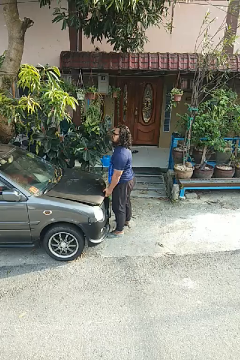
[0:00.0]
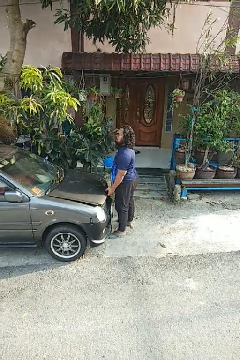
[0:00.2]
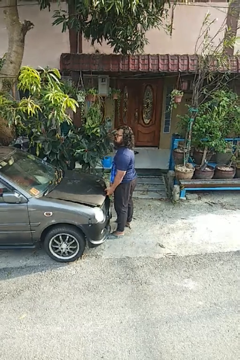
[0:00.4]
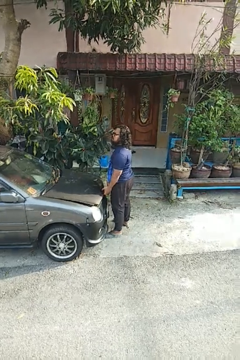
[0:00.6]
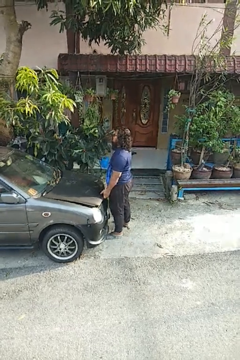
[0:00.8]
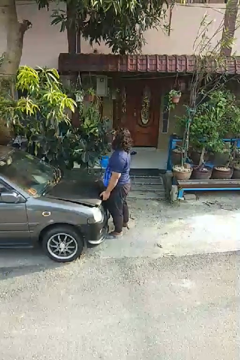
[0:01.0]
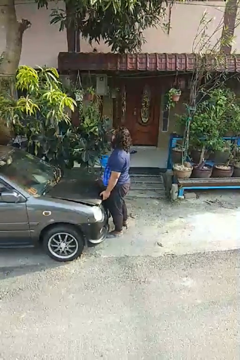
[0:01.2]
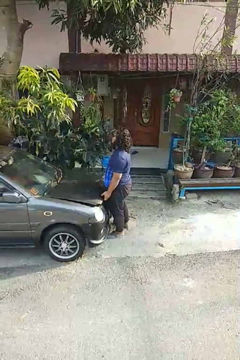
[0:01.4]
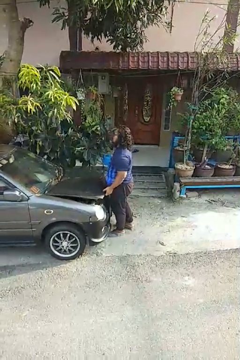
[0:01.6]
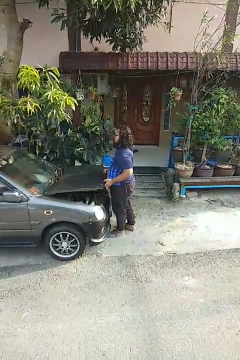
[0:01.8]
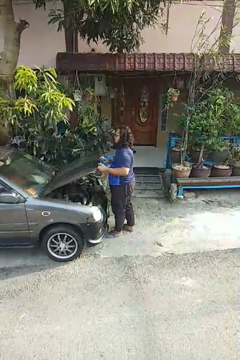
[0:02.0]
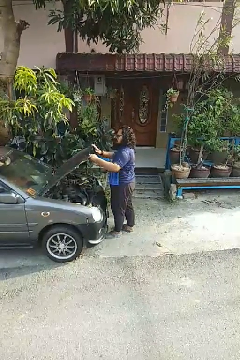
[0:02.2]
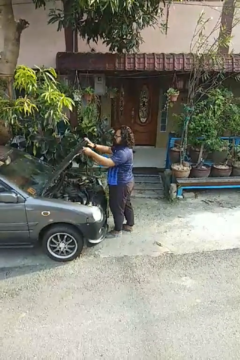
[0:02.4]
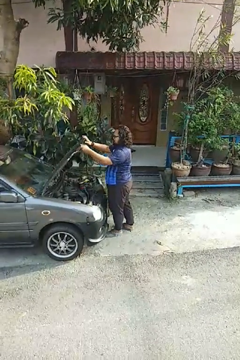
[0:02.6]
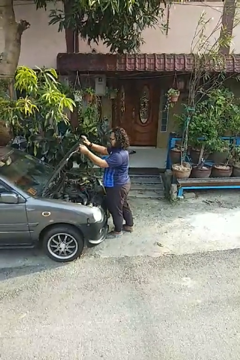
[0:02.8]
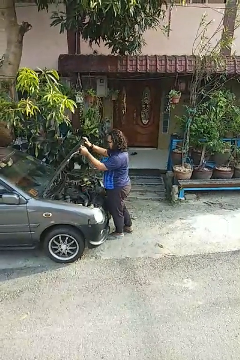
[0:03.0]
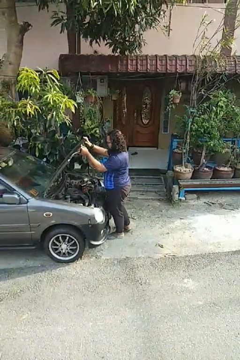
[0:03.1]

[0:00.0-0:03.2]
person opens car hood

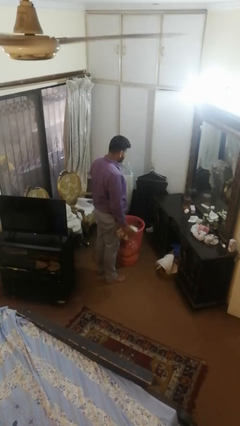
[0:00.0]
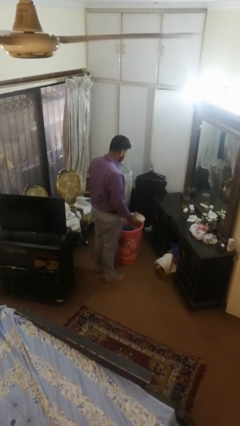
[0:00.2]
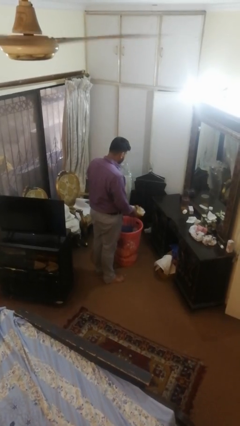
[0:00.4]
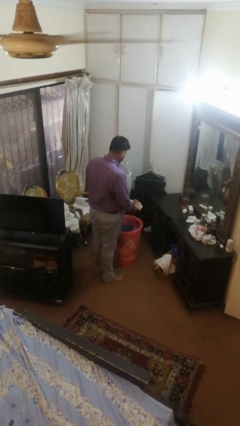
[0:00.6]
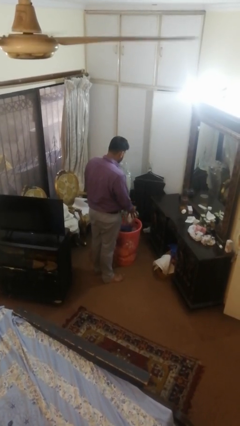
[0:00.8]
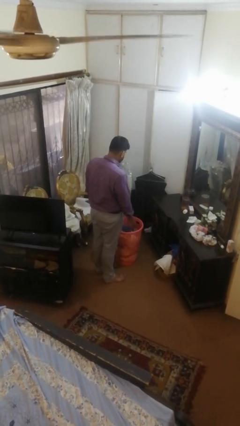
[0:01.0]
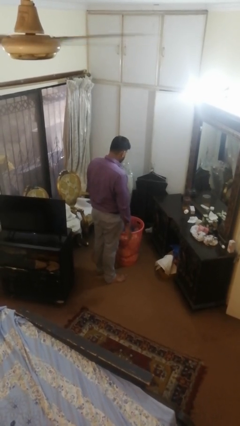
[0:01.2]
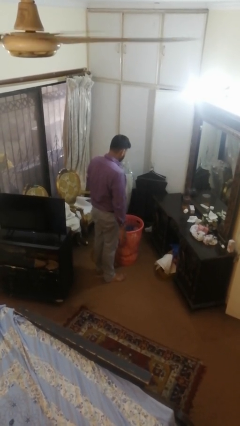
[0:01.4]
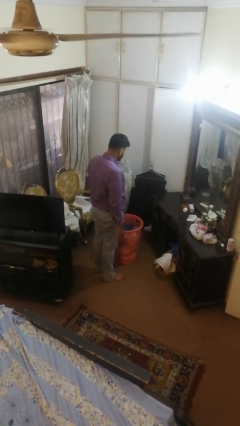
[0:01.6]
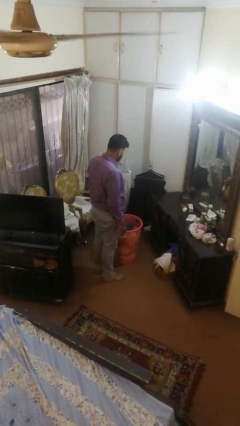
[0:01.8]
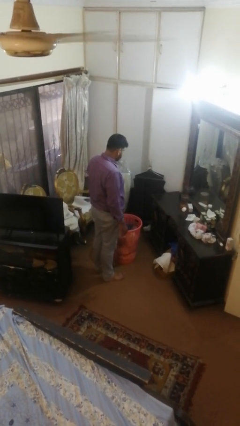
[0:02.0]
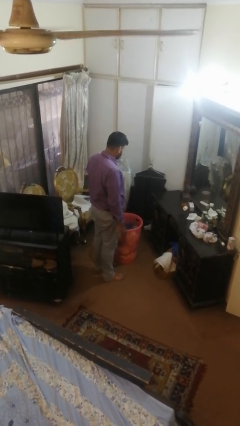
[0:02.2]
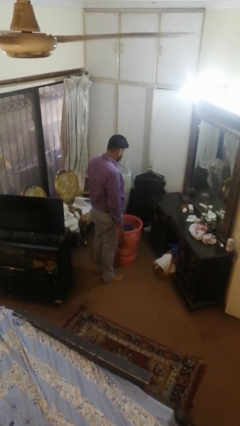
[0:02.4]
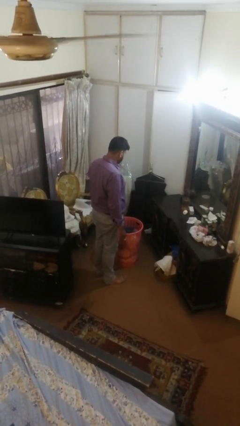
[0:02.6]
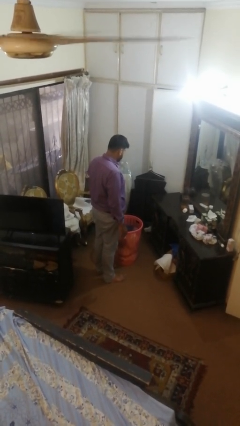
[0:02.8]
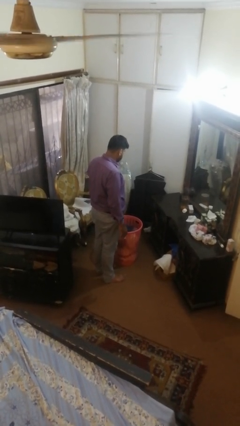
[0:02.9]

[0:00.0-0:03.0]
person puts object into basket

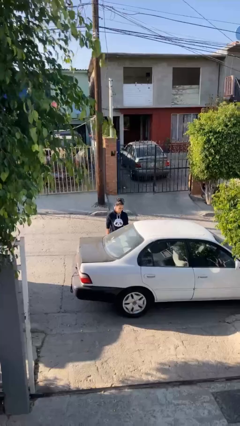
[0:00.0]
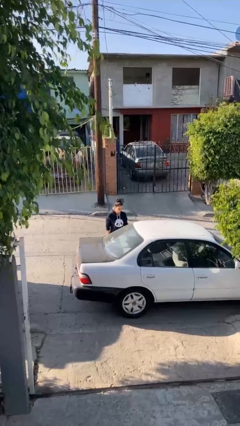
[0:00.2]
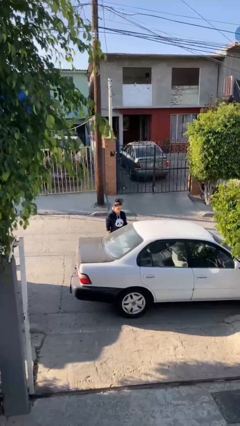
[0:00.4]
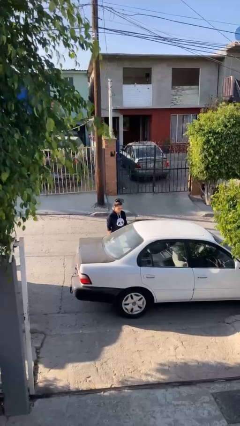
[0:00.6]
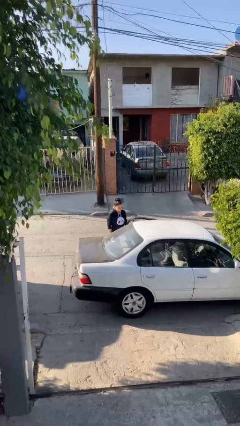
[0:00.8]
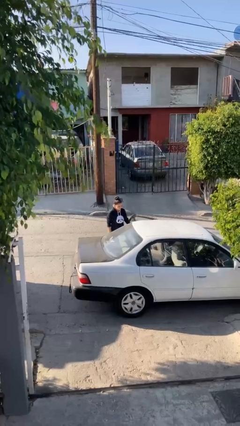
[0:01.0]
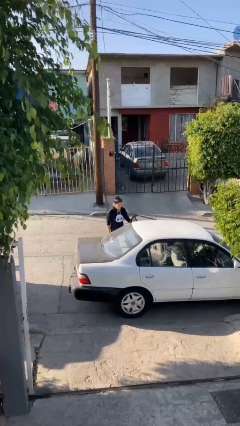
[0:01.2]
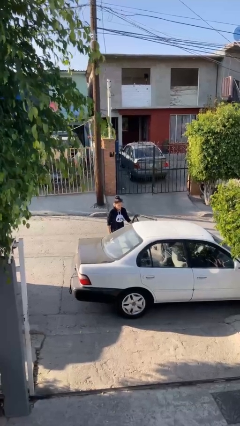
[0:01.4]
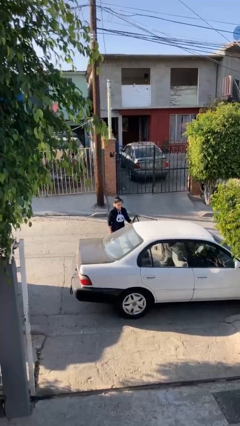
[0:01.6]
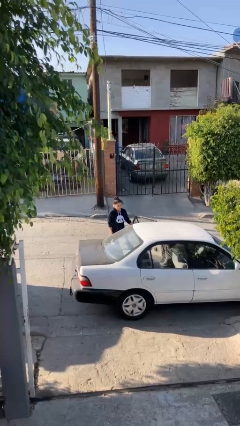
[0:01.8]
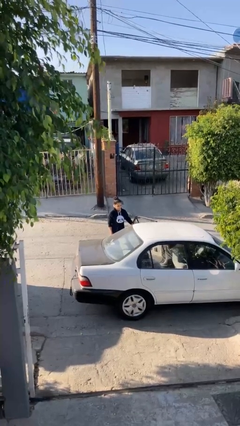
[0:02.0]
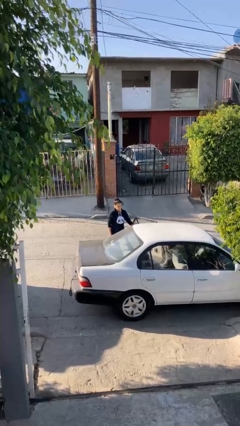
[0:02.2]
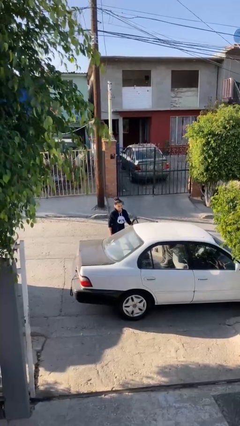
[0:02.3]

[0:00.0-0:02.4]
person opens car door

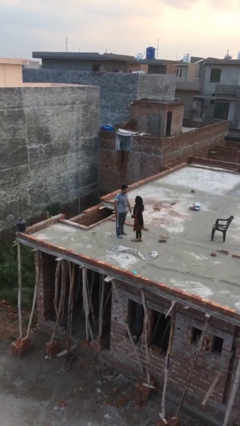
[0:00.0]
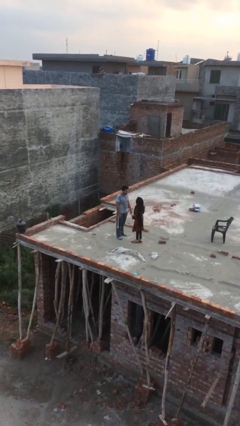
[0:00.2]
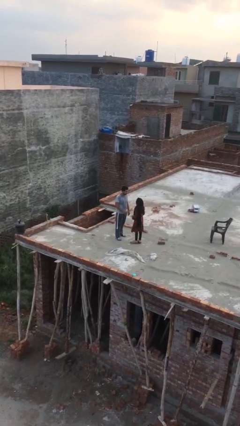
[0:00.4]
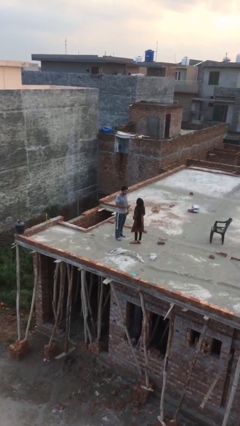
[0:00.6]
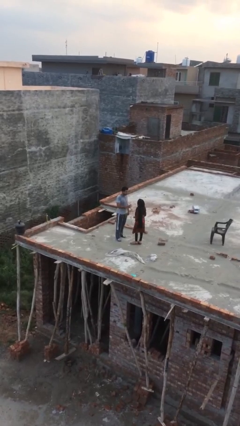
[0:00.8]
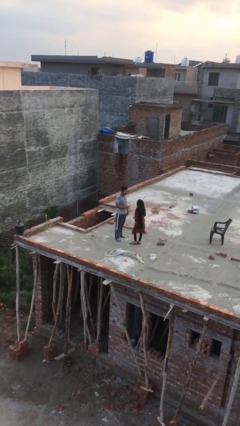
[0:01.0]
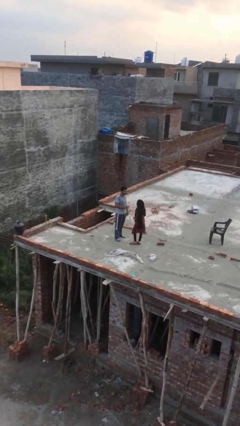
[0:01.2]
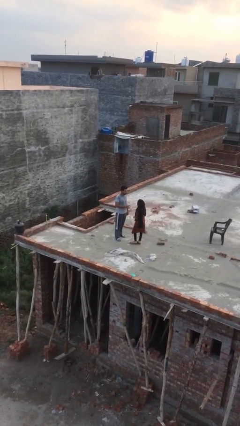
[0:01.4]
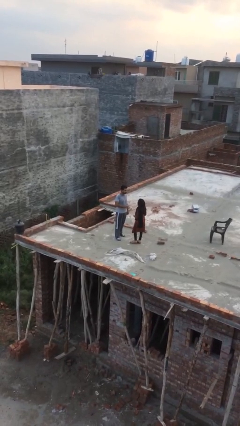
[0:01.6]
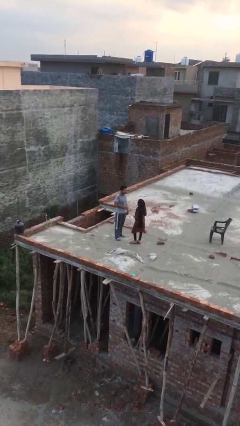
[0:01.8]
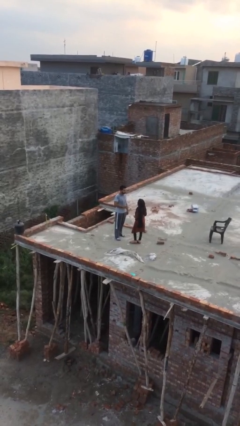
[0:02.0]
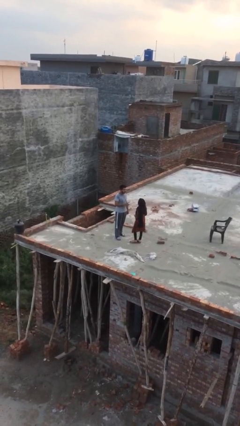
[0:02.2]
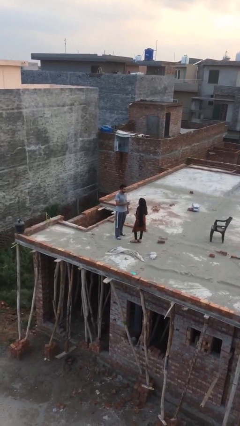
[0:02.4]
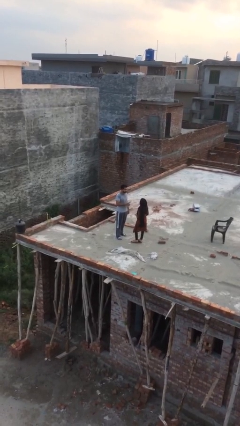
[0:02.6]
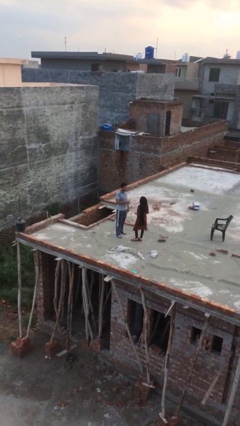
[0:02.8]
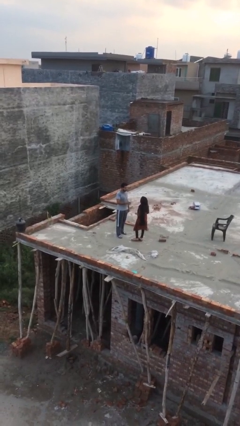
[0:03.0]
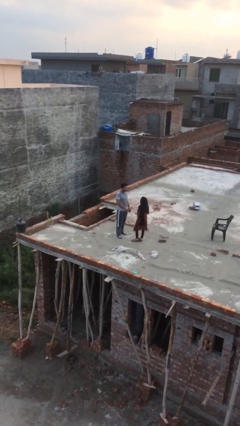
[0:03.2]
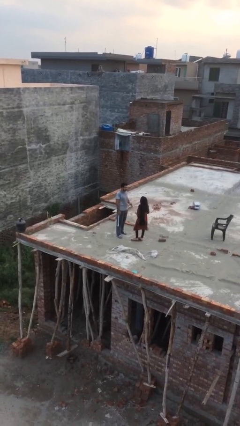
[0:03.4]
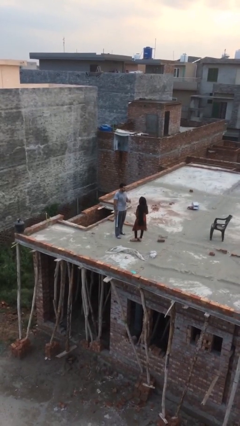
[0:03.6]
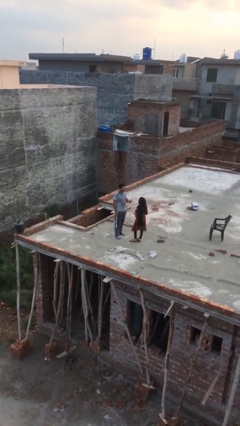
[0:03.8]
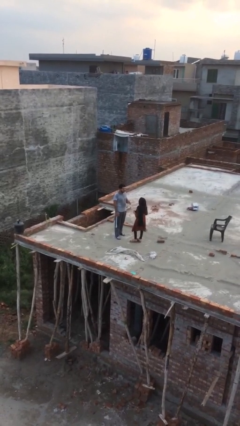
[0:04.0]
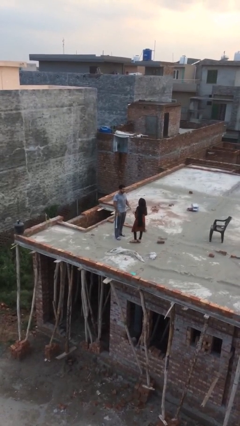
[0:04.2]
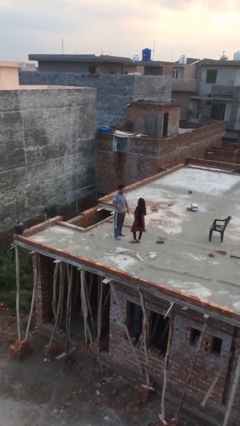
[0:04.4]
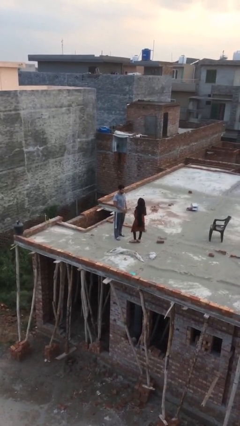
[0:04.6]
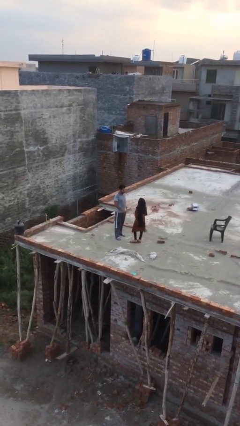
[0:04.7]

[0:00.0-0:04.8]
person talks to person

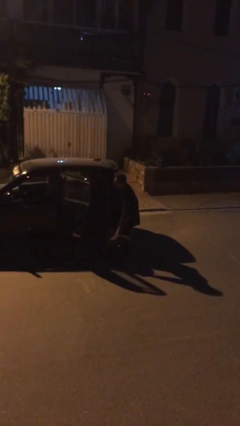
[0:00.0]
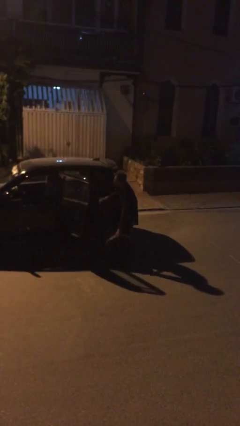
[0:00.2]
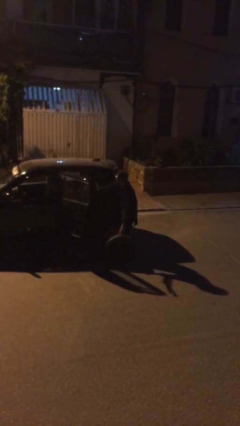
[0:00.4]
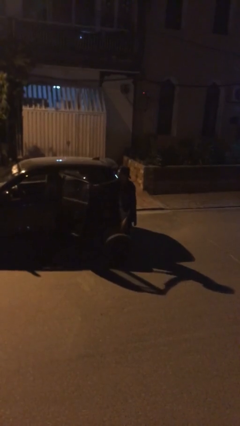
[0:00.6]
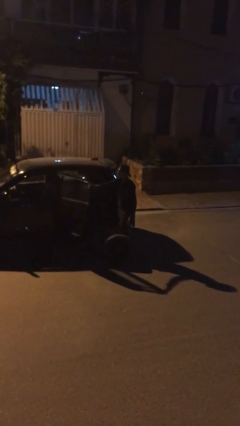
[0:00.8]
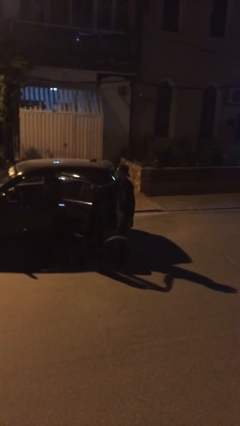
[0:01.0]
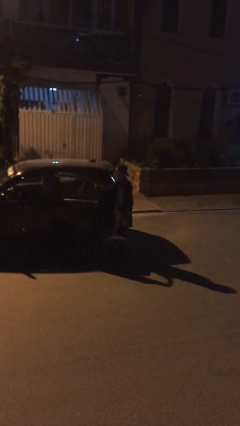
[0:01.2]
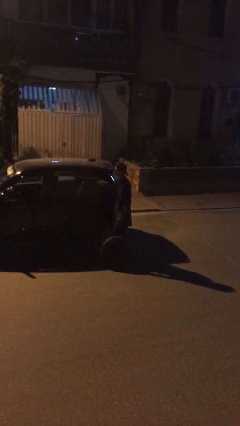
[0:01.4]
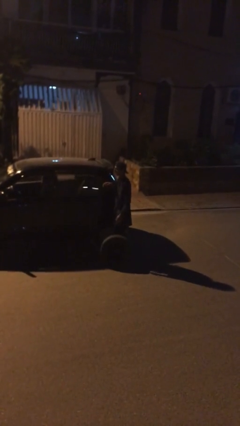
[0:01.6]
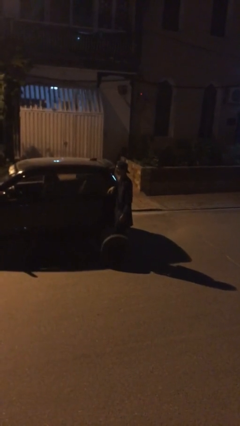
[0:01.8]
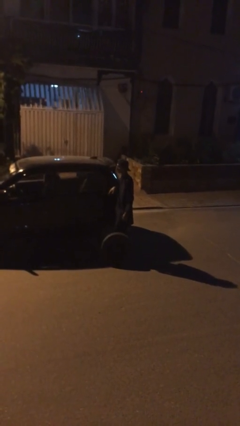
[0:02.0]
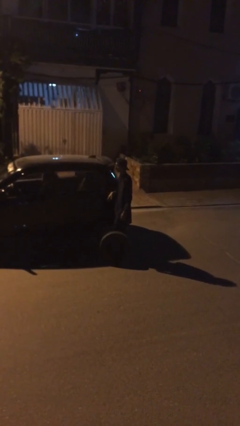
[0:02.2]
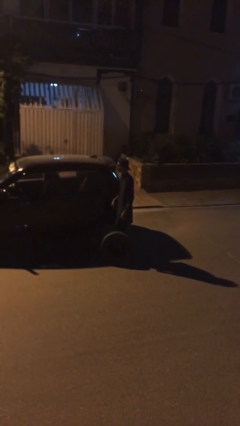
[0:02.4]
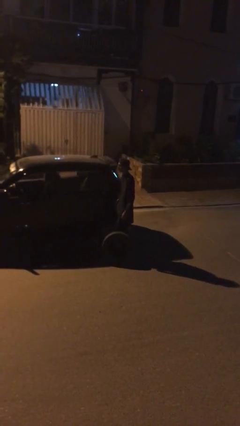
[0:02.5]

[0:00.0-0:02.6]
person closes car door

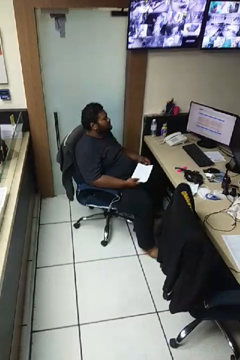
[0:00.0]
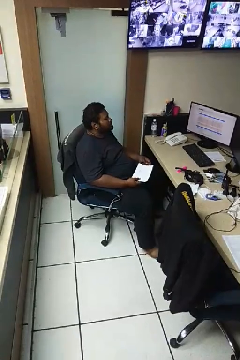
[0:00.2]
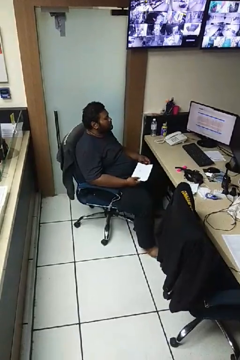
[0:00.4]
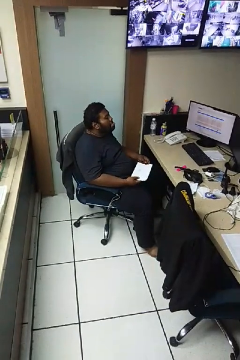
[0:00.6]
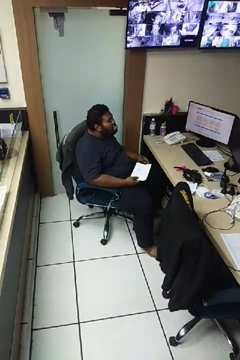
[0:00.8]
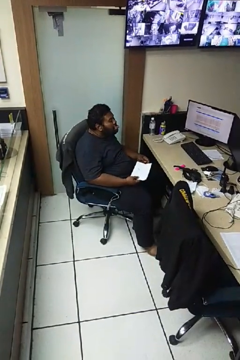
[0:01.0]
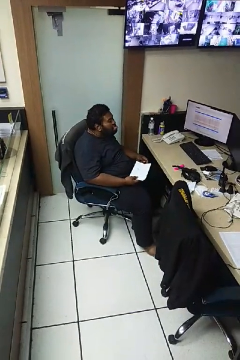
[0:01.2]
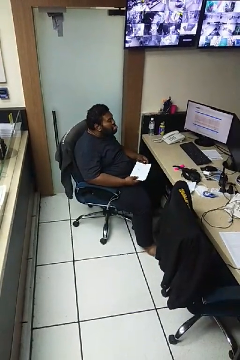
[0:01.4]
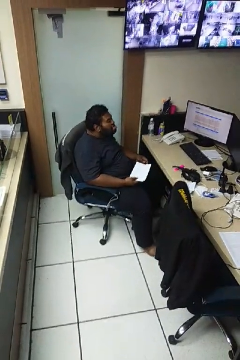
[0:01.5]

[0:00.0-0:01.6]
person sticks out tongue

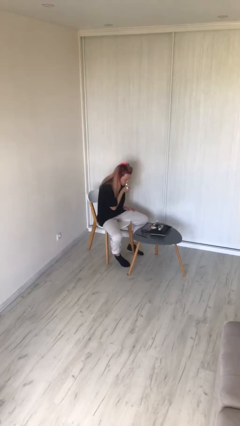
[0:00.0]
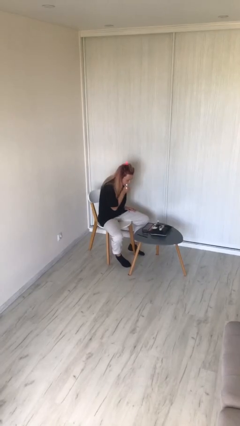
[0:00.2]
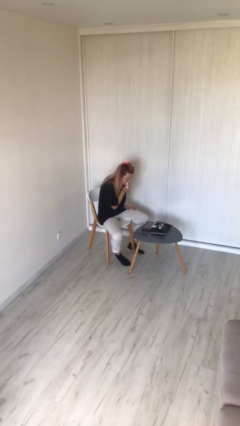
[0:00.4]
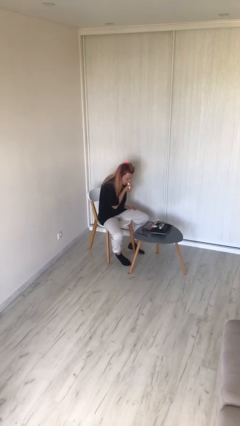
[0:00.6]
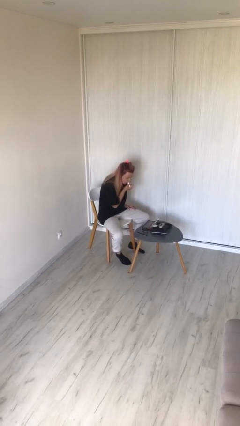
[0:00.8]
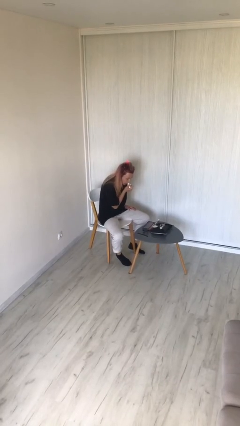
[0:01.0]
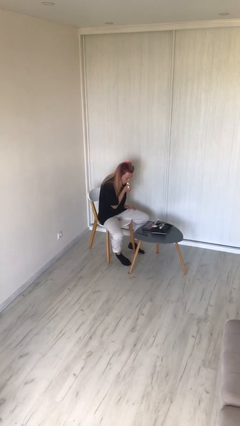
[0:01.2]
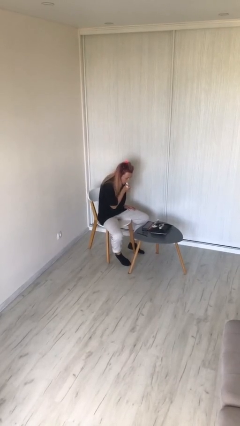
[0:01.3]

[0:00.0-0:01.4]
person applies lip makeup
